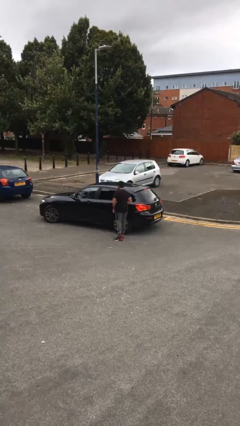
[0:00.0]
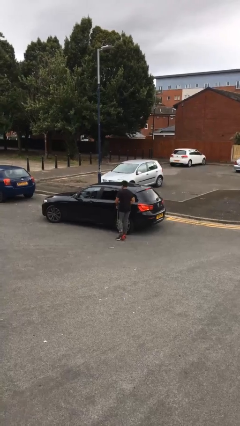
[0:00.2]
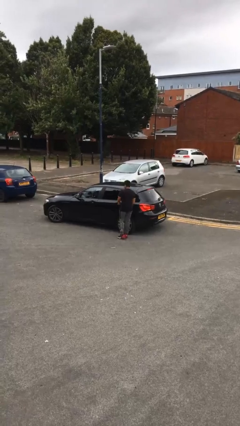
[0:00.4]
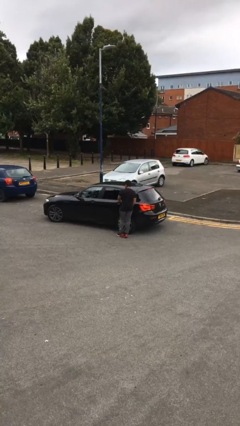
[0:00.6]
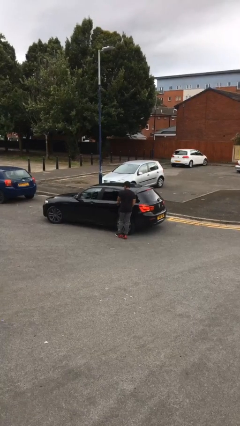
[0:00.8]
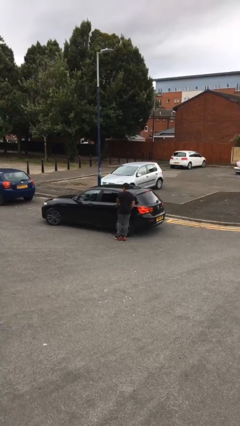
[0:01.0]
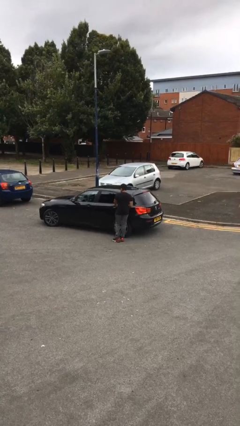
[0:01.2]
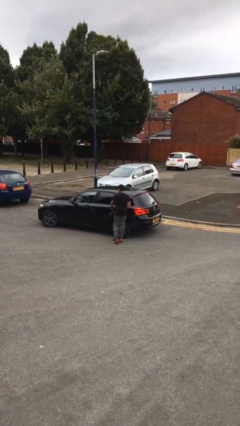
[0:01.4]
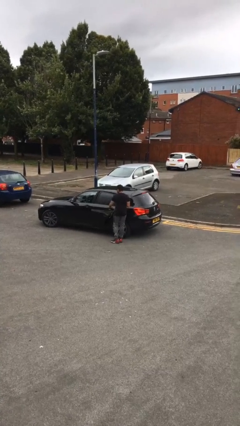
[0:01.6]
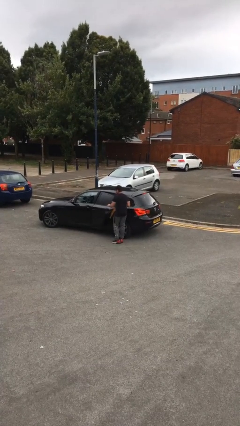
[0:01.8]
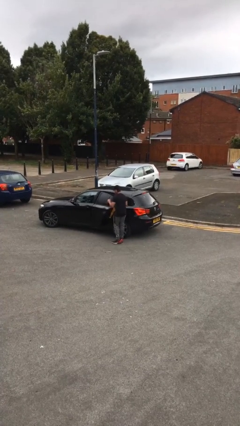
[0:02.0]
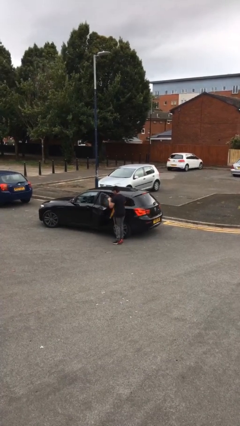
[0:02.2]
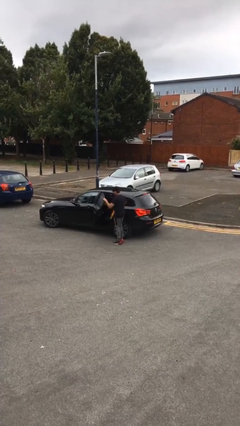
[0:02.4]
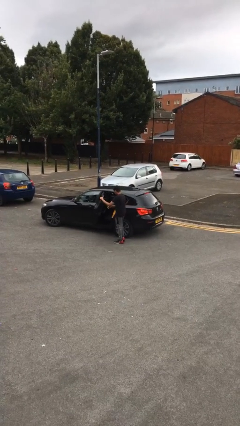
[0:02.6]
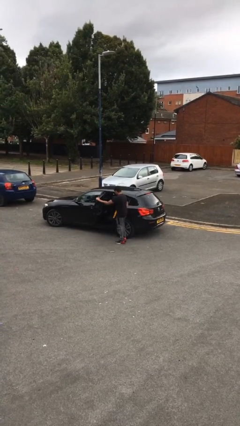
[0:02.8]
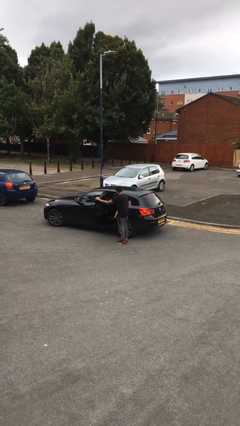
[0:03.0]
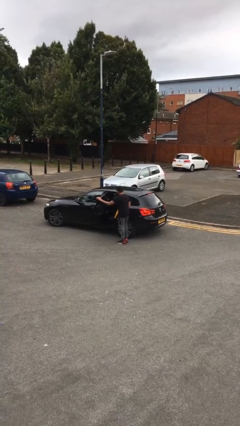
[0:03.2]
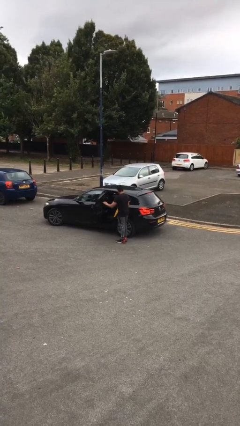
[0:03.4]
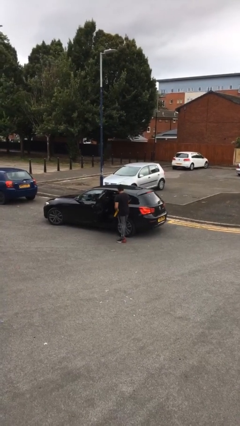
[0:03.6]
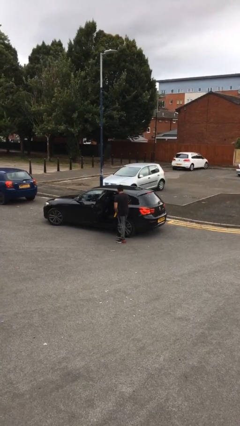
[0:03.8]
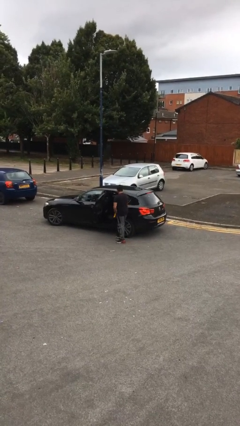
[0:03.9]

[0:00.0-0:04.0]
person opens car door

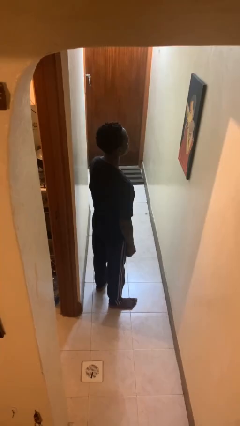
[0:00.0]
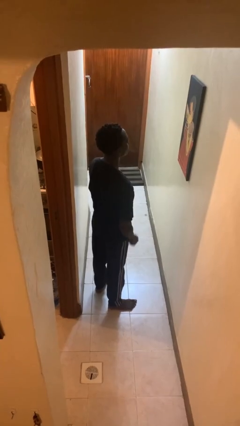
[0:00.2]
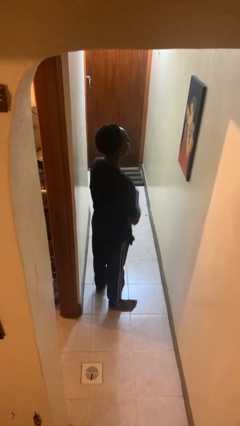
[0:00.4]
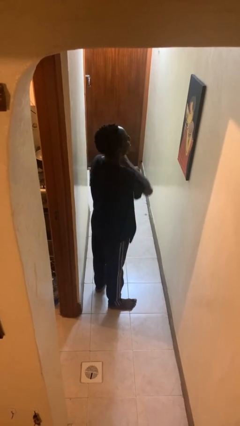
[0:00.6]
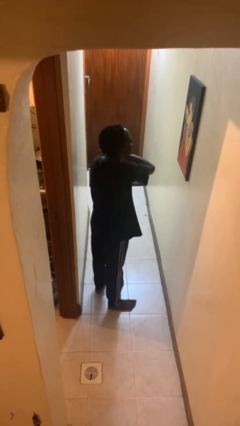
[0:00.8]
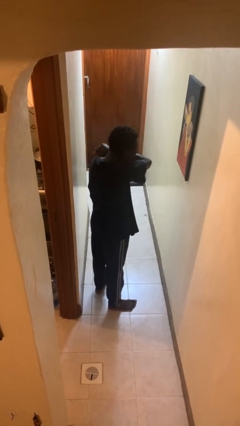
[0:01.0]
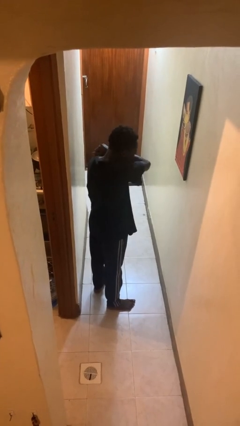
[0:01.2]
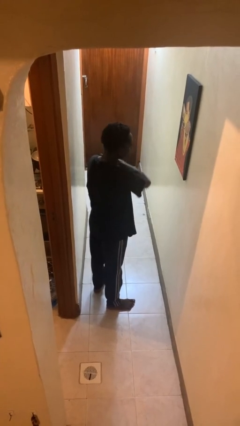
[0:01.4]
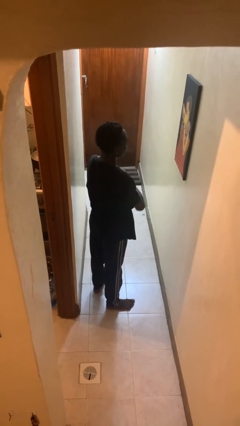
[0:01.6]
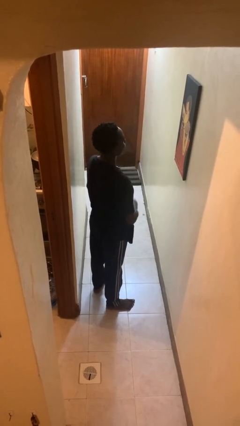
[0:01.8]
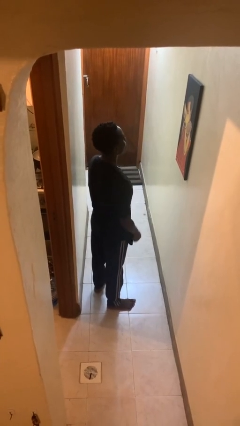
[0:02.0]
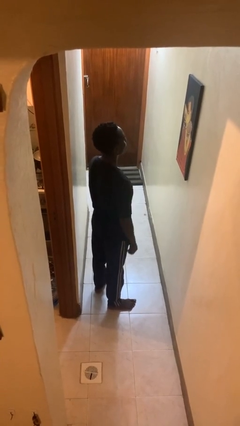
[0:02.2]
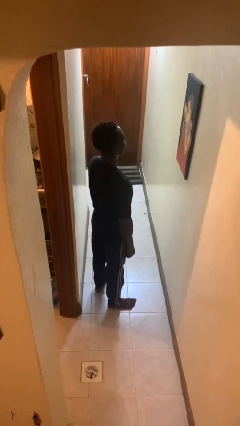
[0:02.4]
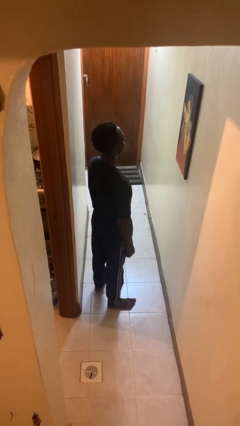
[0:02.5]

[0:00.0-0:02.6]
person sneezes into arm

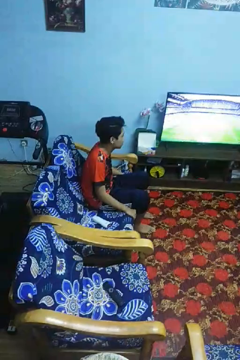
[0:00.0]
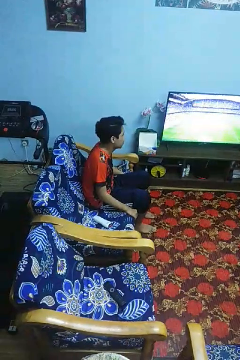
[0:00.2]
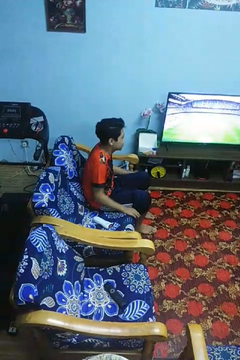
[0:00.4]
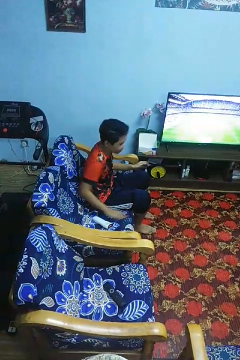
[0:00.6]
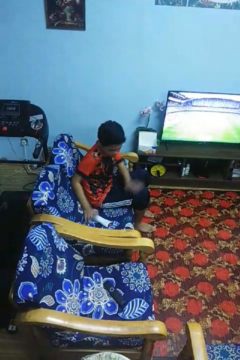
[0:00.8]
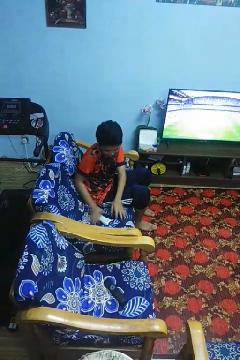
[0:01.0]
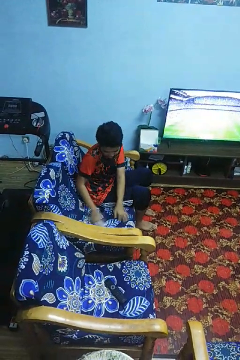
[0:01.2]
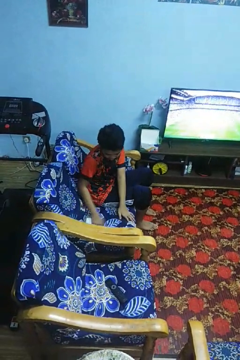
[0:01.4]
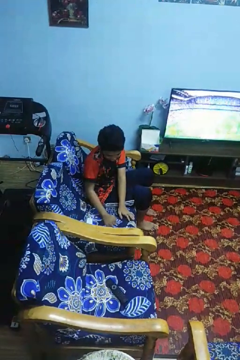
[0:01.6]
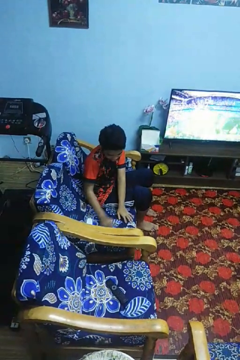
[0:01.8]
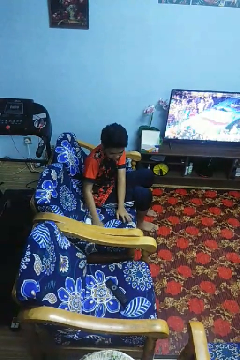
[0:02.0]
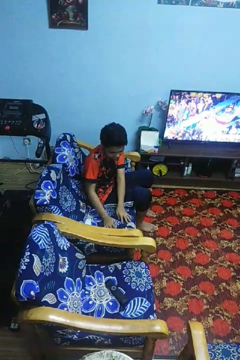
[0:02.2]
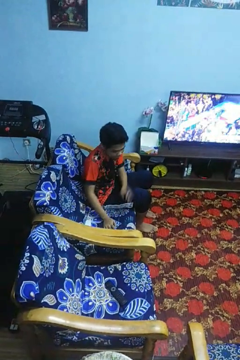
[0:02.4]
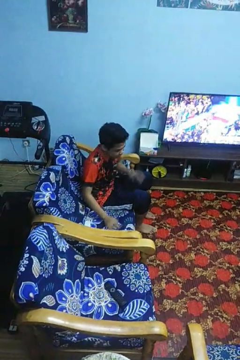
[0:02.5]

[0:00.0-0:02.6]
person searches in couch

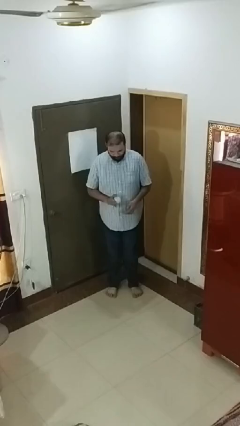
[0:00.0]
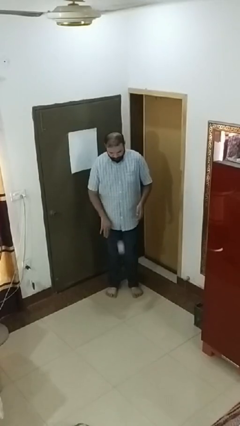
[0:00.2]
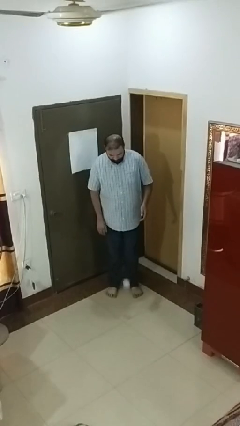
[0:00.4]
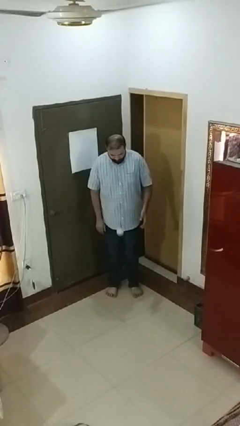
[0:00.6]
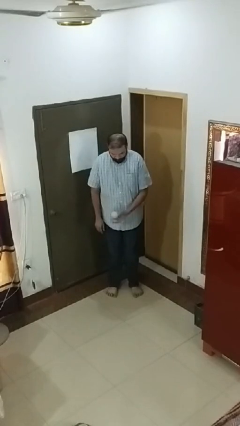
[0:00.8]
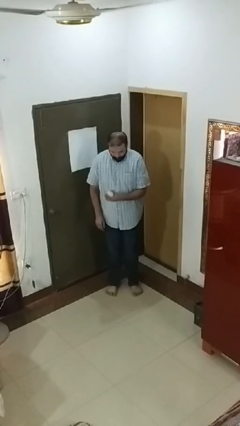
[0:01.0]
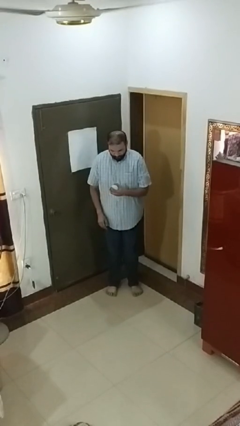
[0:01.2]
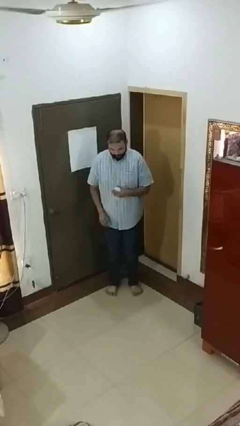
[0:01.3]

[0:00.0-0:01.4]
person bounces ball on floor

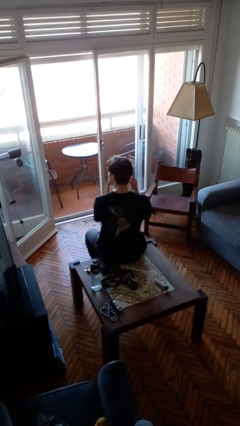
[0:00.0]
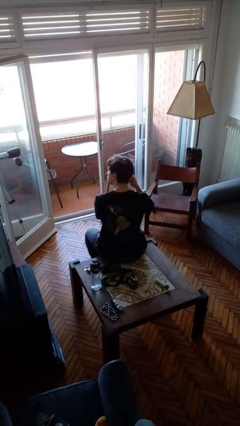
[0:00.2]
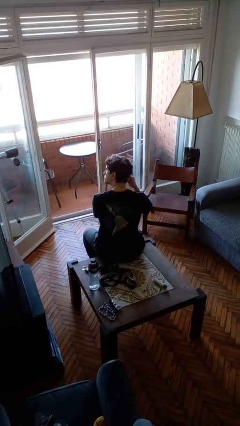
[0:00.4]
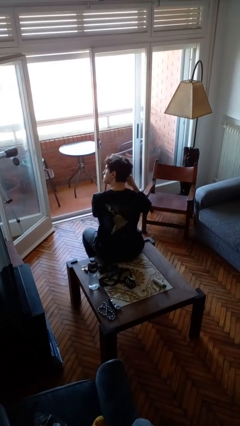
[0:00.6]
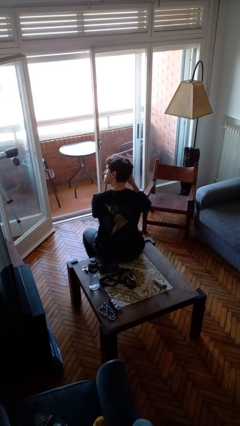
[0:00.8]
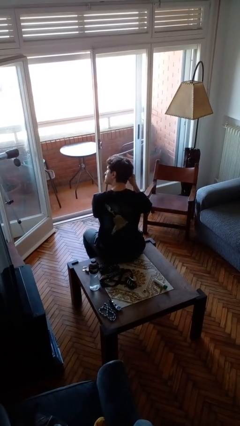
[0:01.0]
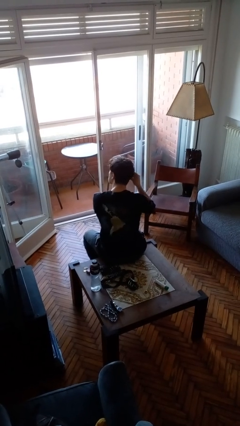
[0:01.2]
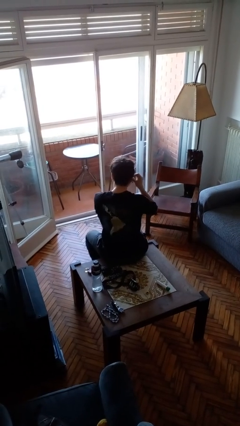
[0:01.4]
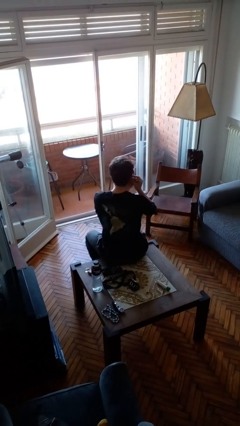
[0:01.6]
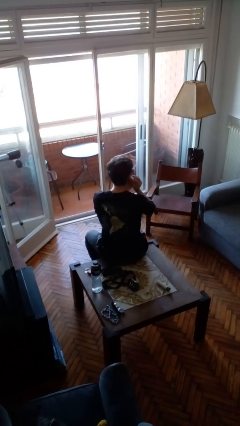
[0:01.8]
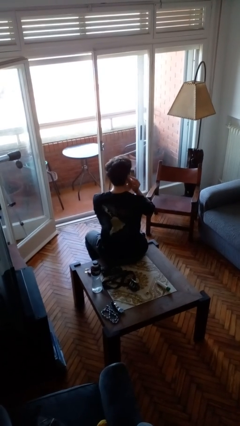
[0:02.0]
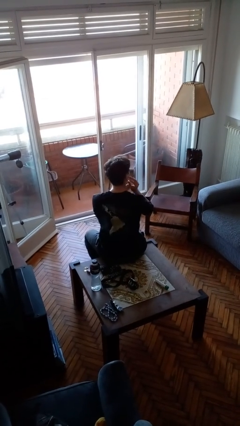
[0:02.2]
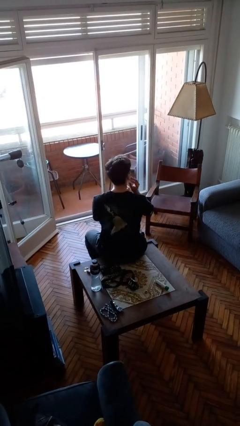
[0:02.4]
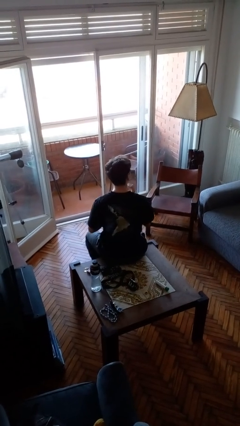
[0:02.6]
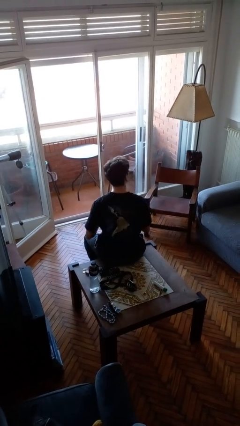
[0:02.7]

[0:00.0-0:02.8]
person puts on earrings

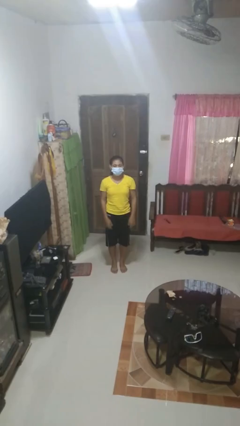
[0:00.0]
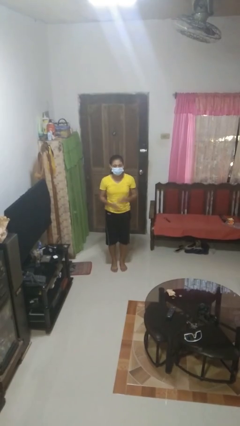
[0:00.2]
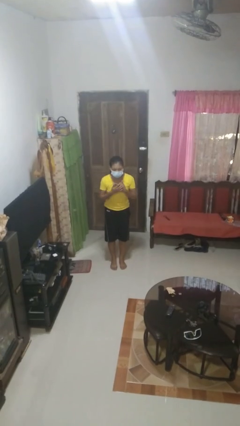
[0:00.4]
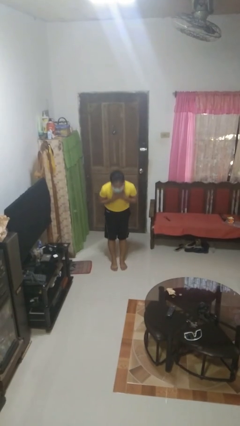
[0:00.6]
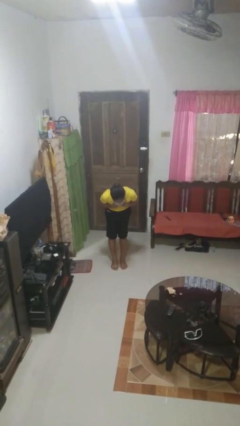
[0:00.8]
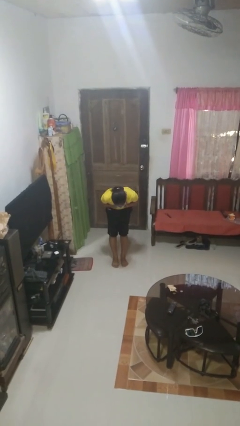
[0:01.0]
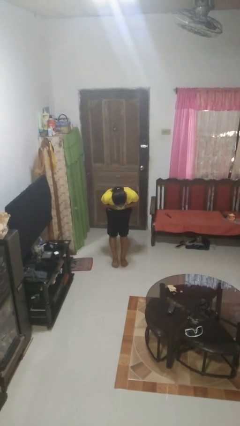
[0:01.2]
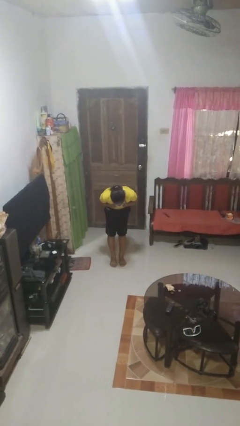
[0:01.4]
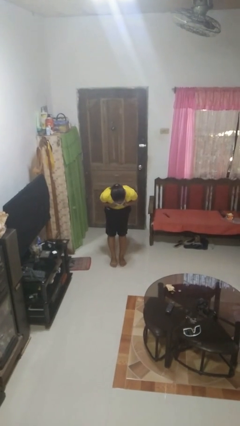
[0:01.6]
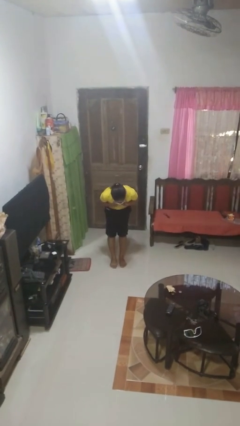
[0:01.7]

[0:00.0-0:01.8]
person bows

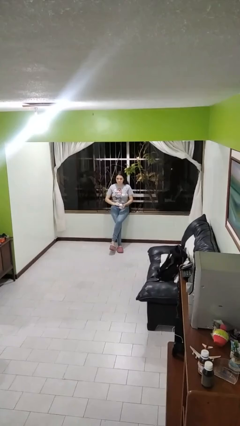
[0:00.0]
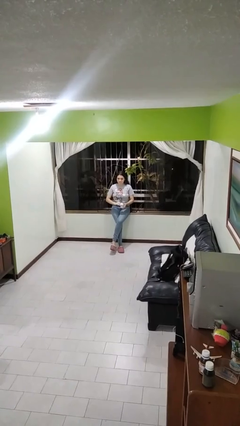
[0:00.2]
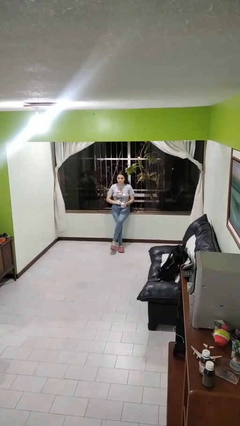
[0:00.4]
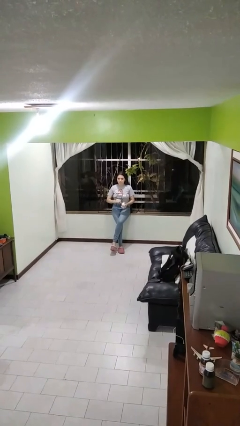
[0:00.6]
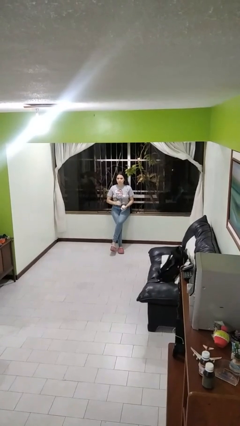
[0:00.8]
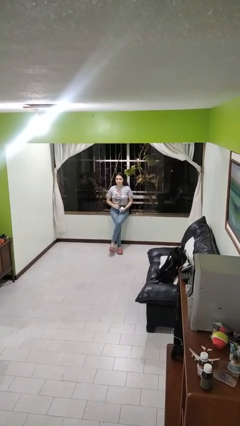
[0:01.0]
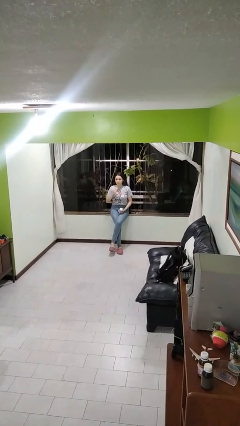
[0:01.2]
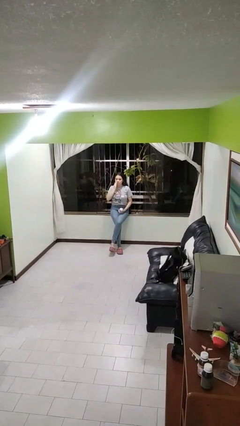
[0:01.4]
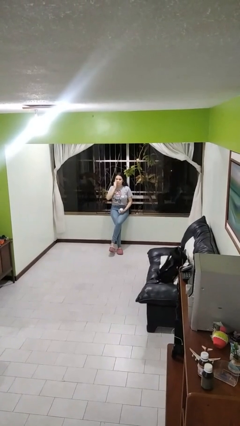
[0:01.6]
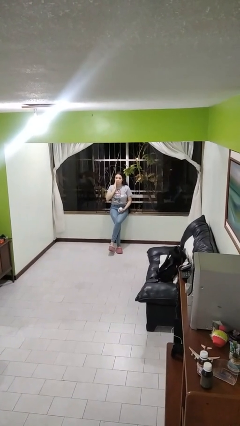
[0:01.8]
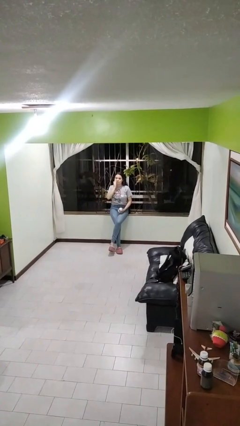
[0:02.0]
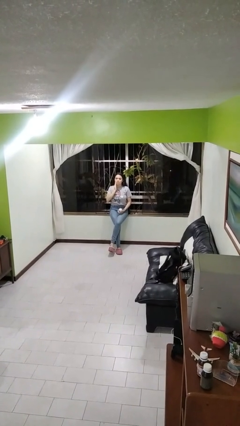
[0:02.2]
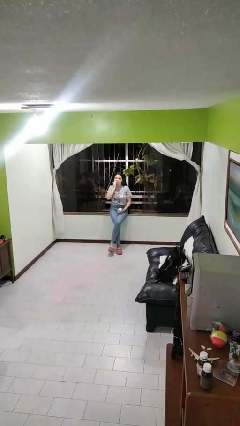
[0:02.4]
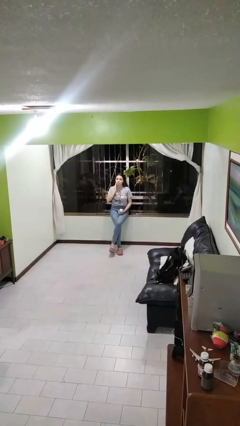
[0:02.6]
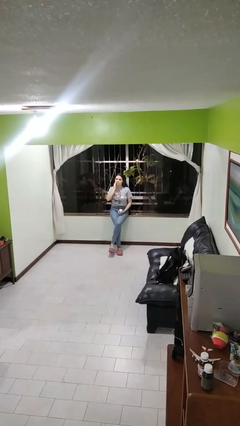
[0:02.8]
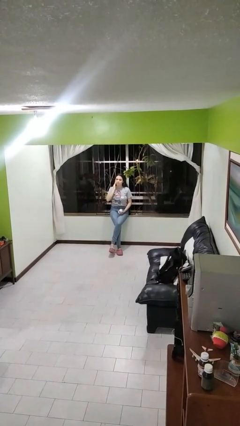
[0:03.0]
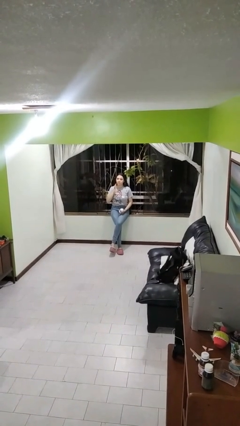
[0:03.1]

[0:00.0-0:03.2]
person applies facial moisturizer
